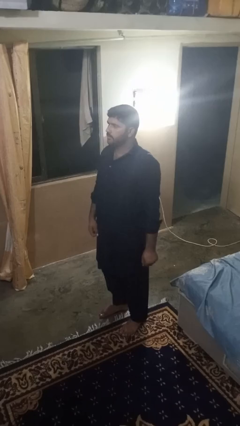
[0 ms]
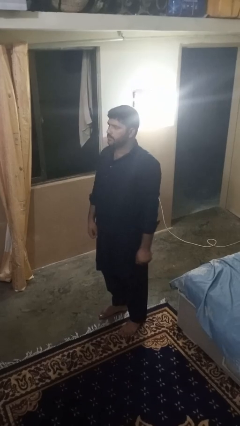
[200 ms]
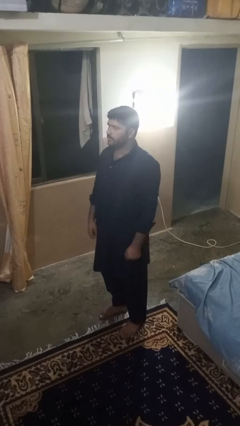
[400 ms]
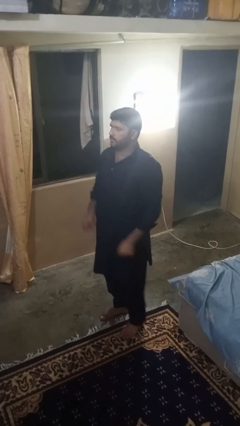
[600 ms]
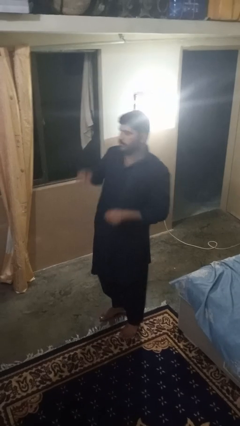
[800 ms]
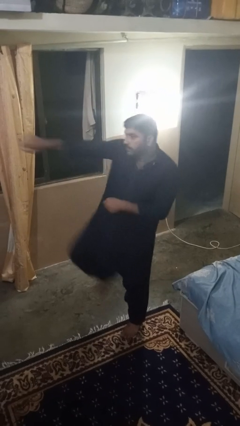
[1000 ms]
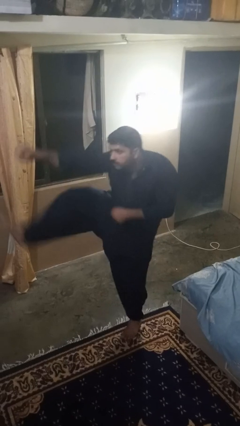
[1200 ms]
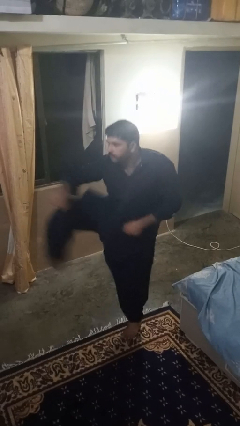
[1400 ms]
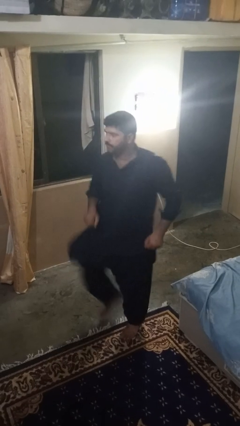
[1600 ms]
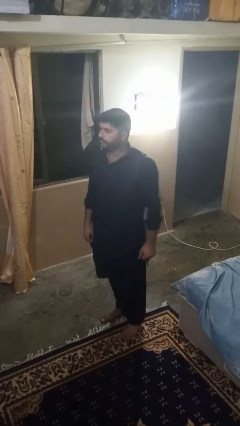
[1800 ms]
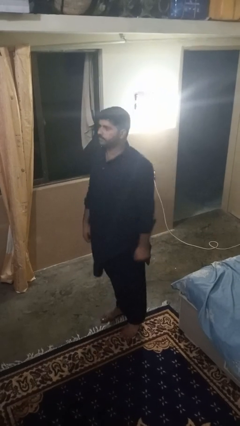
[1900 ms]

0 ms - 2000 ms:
person karate kicks

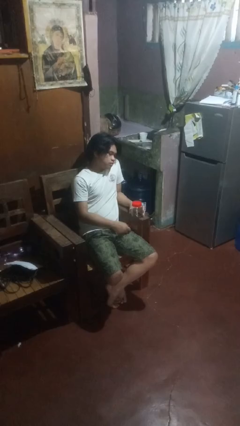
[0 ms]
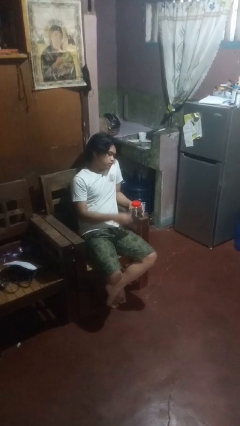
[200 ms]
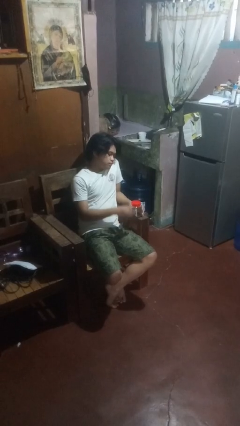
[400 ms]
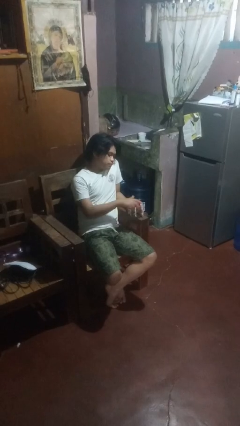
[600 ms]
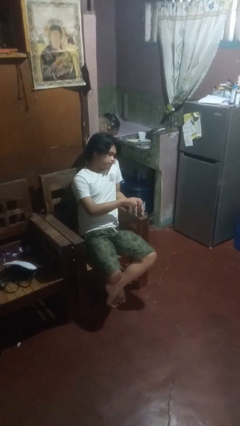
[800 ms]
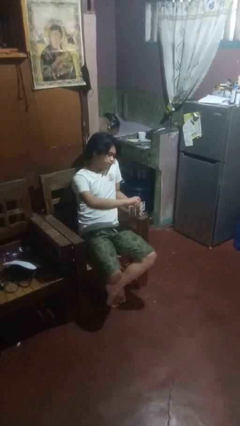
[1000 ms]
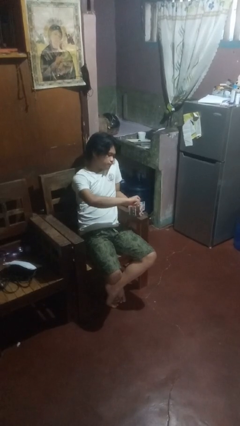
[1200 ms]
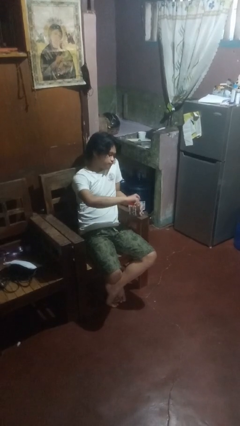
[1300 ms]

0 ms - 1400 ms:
person opens jar

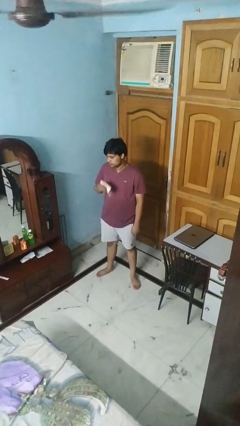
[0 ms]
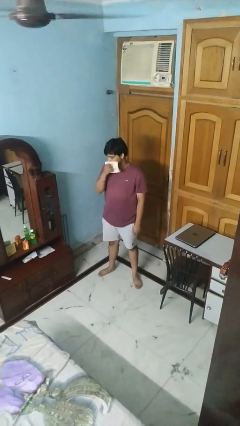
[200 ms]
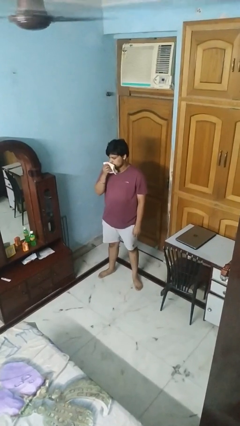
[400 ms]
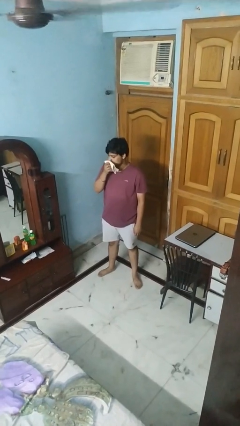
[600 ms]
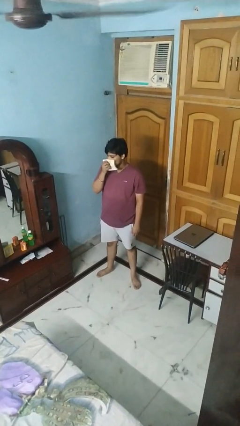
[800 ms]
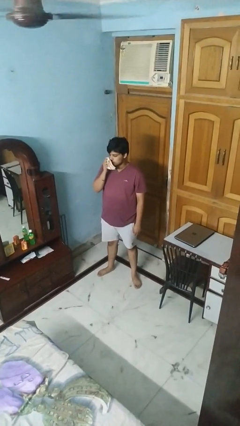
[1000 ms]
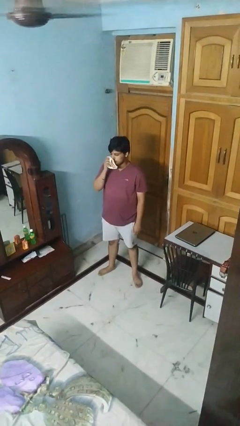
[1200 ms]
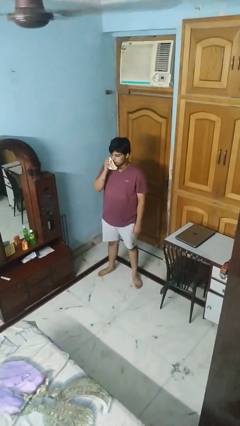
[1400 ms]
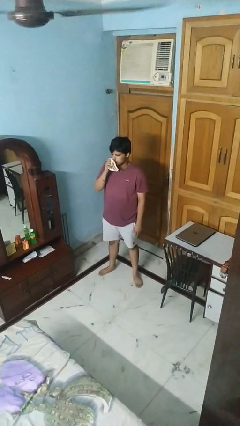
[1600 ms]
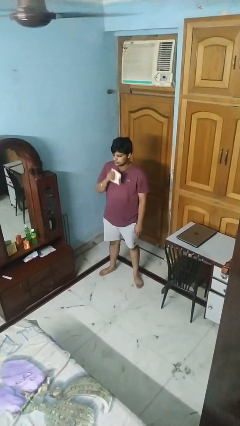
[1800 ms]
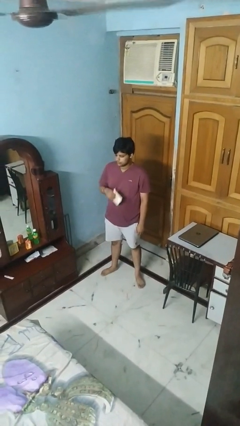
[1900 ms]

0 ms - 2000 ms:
person wipes mouth with napkin

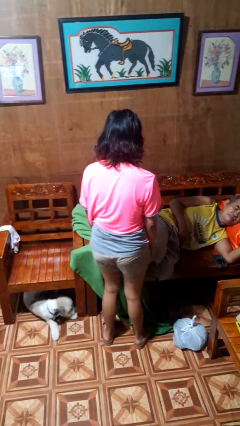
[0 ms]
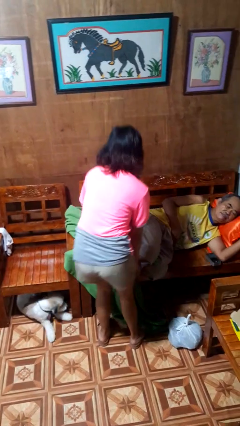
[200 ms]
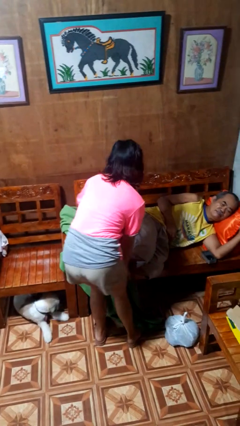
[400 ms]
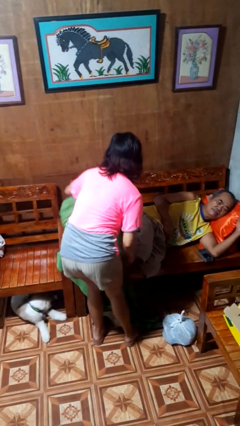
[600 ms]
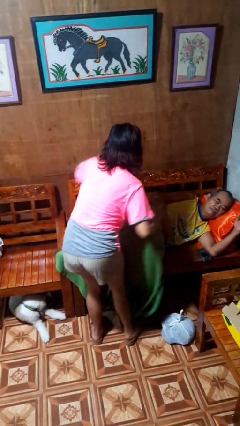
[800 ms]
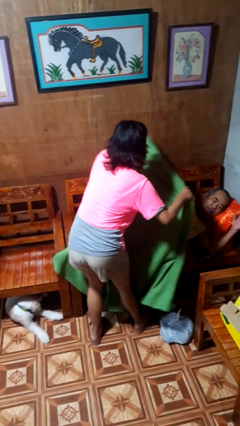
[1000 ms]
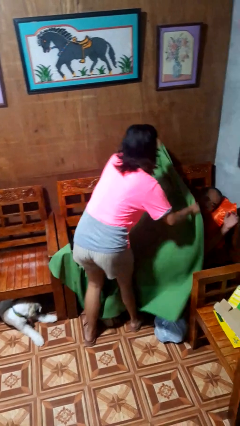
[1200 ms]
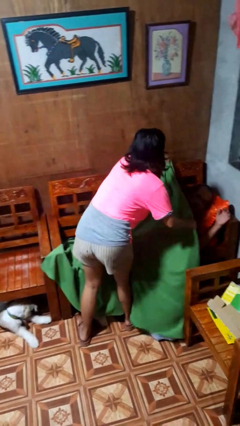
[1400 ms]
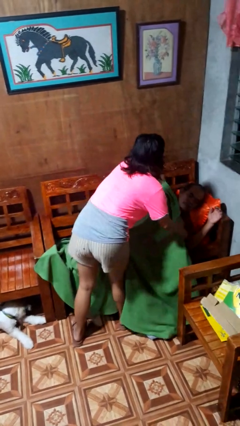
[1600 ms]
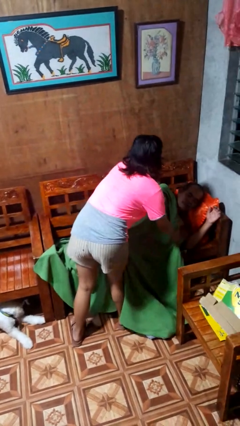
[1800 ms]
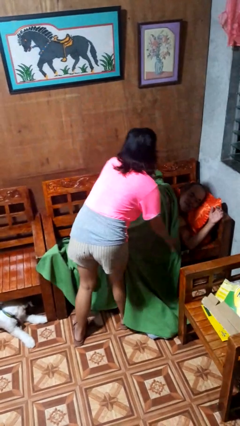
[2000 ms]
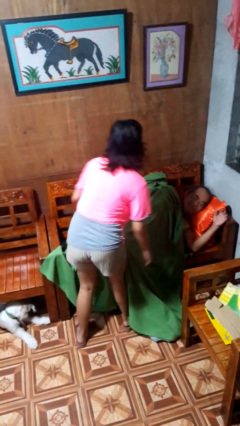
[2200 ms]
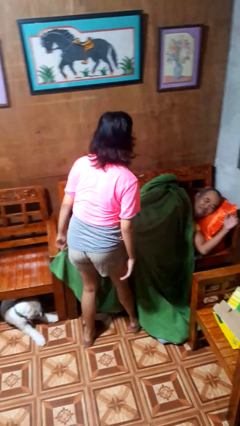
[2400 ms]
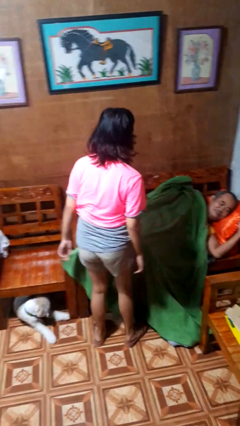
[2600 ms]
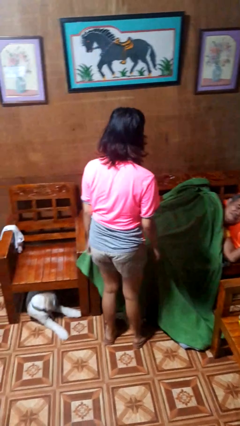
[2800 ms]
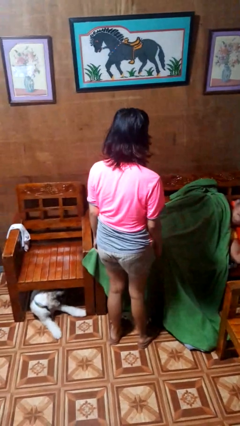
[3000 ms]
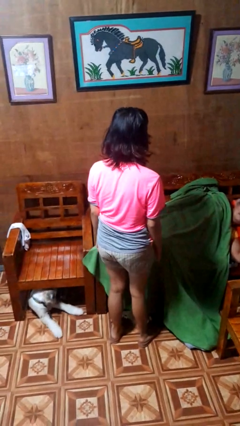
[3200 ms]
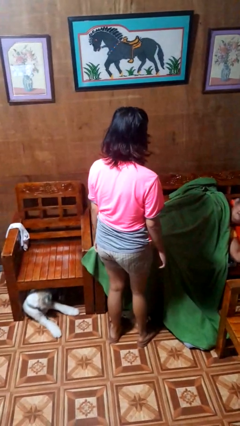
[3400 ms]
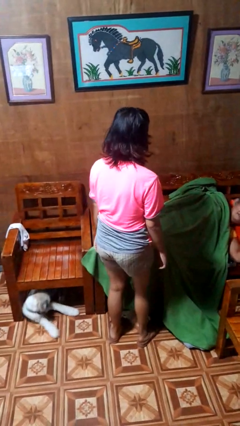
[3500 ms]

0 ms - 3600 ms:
person covers friend with blanket

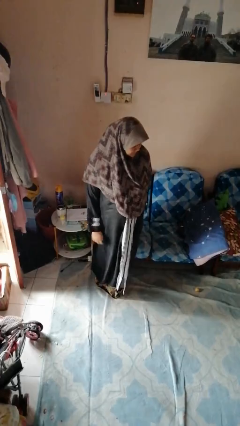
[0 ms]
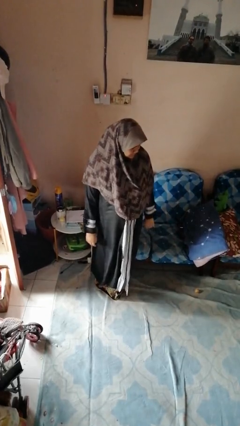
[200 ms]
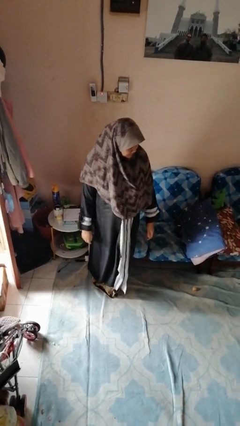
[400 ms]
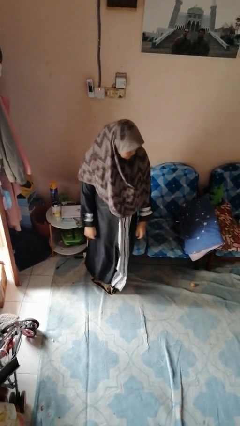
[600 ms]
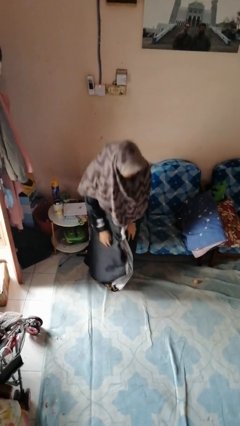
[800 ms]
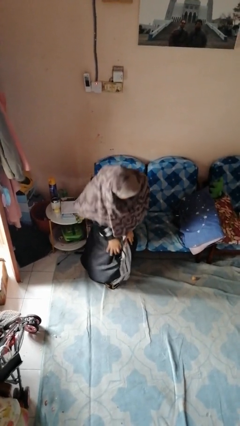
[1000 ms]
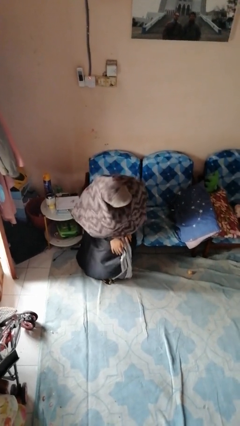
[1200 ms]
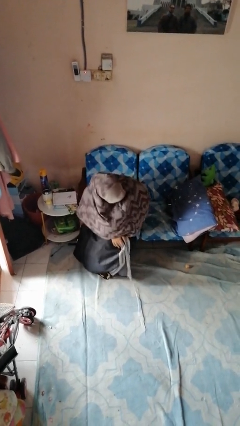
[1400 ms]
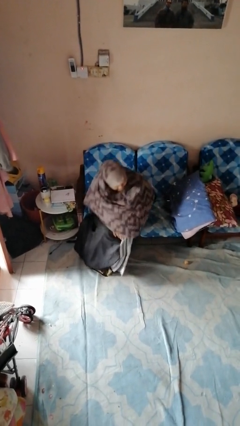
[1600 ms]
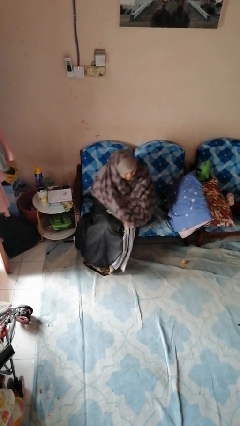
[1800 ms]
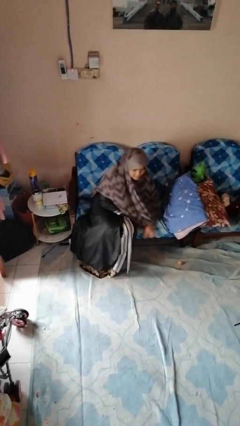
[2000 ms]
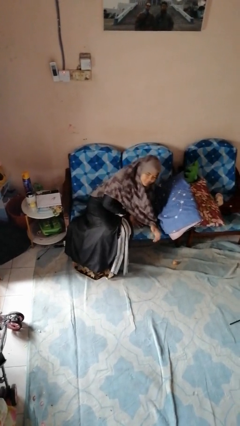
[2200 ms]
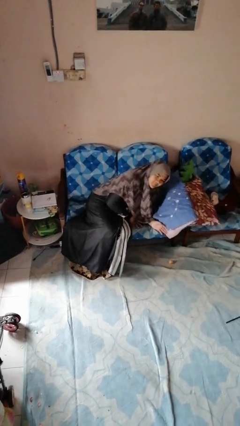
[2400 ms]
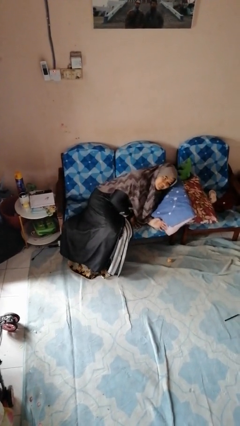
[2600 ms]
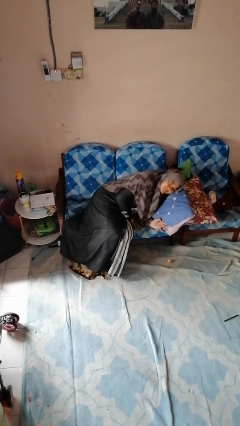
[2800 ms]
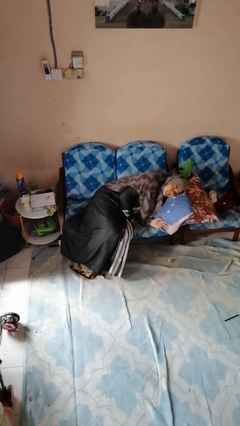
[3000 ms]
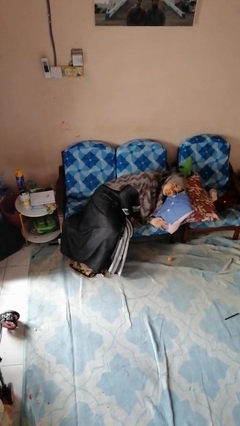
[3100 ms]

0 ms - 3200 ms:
person lies down on couch

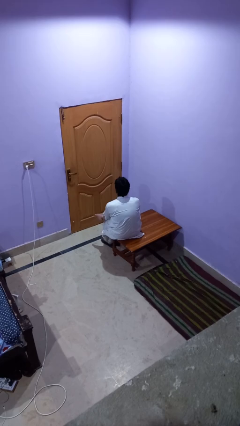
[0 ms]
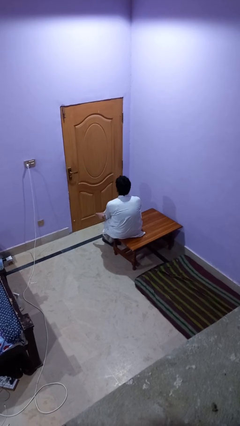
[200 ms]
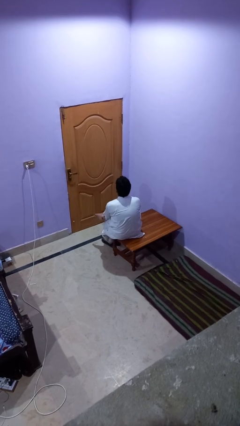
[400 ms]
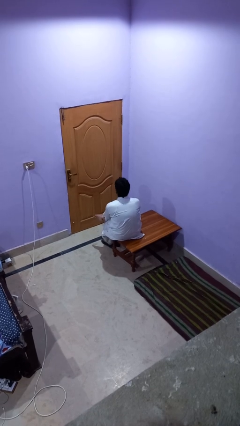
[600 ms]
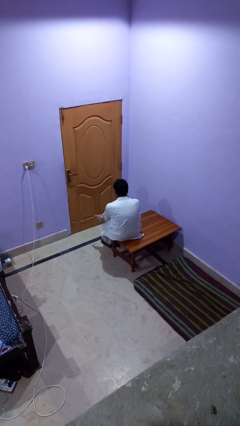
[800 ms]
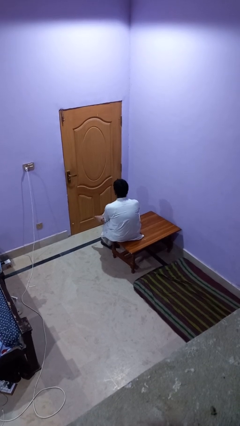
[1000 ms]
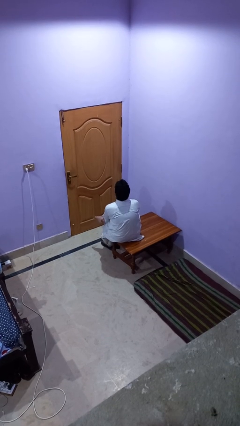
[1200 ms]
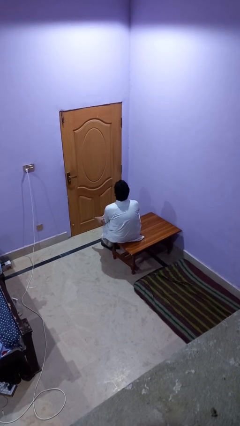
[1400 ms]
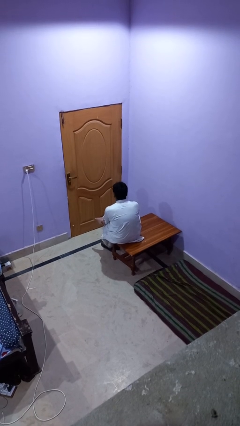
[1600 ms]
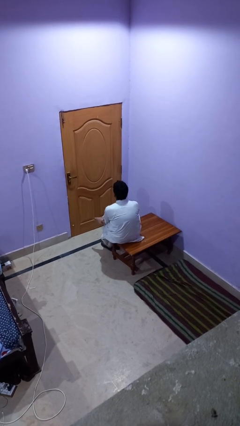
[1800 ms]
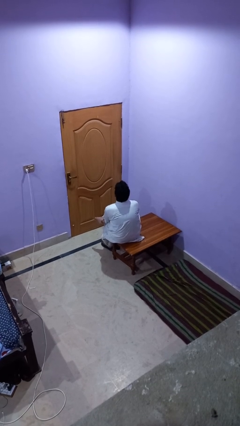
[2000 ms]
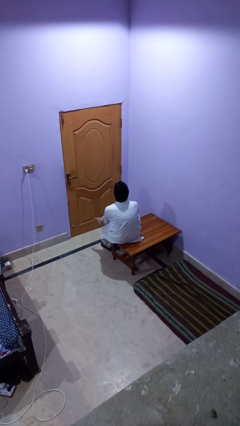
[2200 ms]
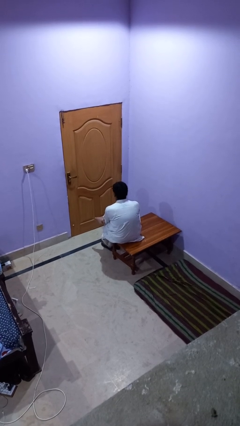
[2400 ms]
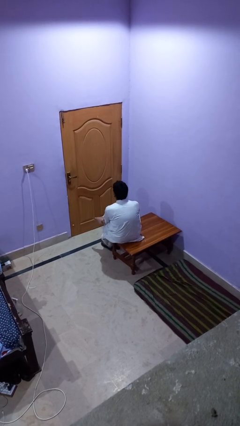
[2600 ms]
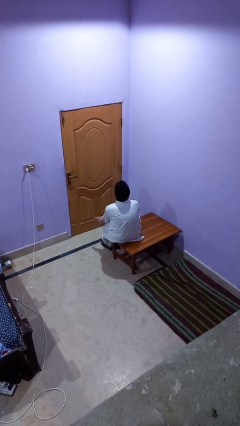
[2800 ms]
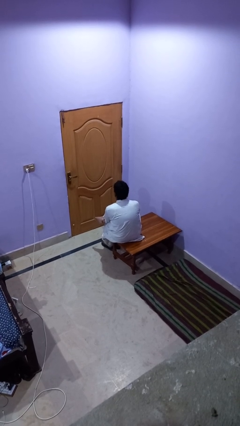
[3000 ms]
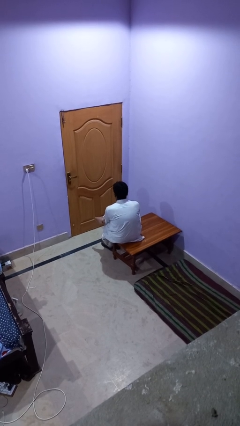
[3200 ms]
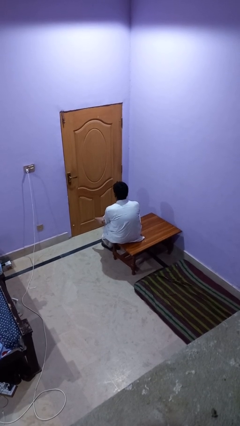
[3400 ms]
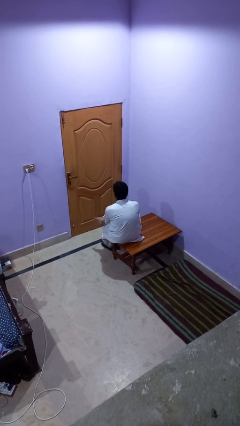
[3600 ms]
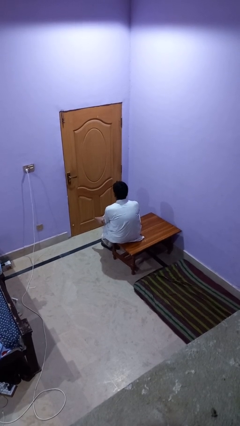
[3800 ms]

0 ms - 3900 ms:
person nods head

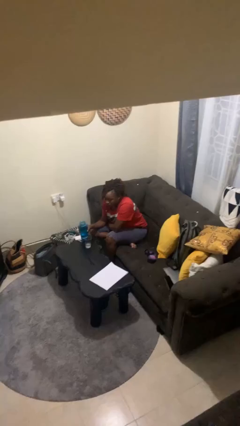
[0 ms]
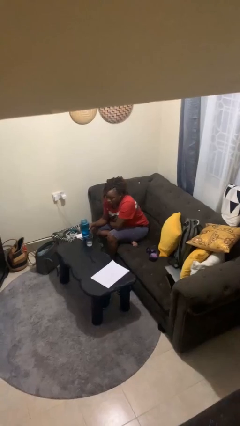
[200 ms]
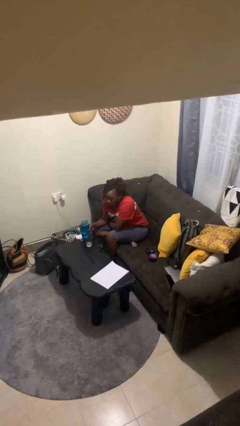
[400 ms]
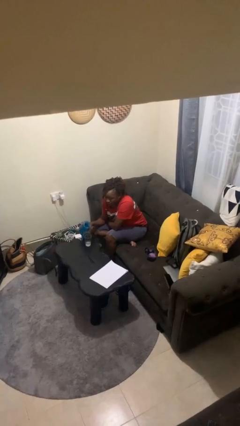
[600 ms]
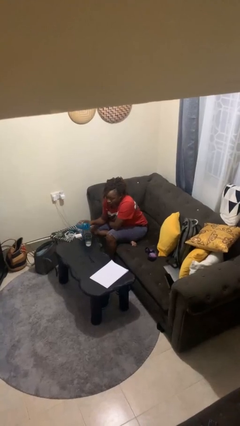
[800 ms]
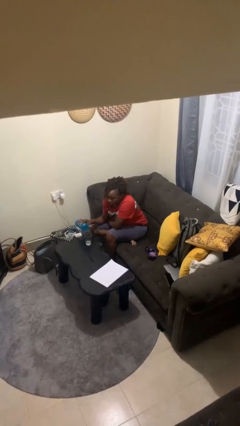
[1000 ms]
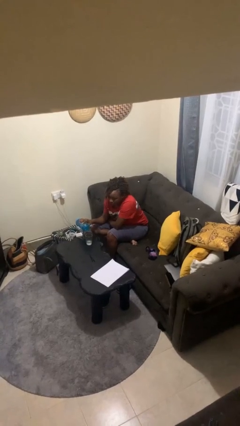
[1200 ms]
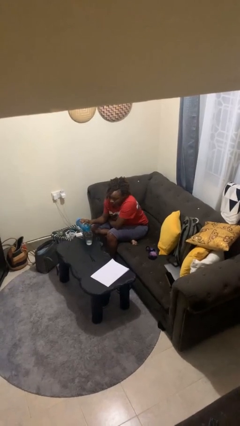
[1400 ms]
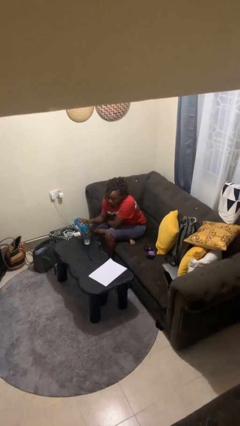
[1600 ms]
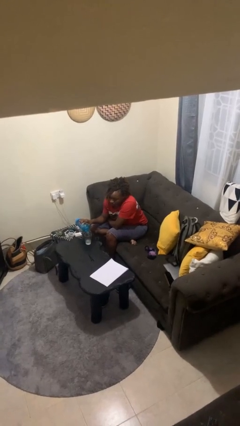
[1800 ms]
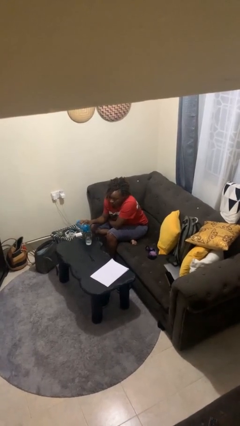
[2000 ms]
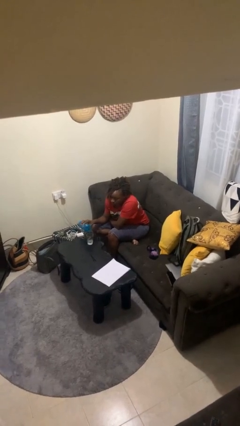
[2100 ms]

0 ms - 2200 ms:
person pours liquid into cup
